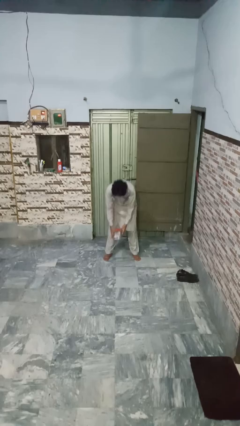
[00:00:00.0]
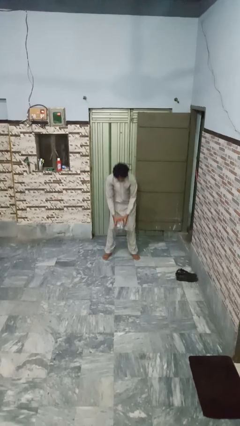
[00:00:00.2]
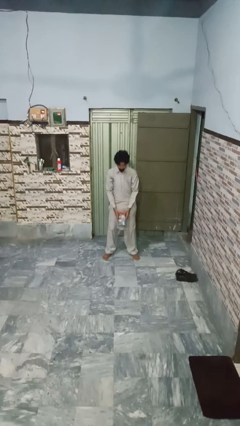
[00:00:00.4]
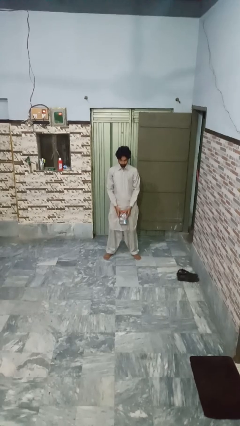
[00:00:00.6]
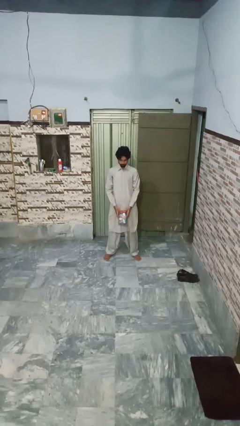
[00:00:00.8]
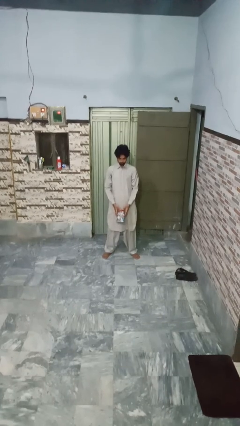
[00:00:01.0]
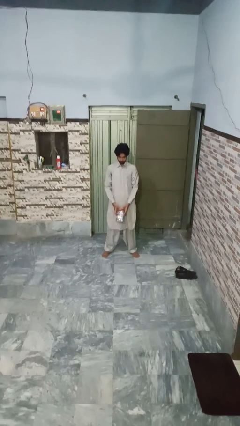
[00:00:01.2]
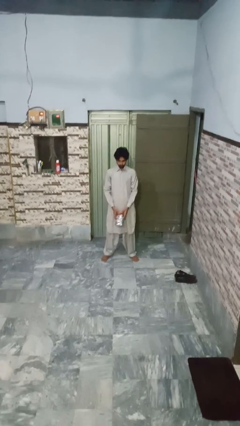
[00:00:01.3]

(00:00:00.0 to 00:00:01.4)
person picks up object from floor

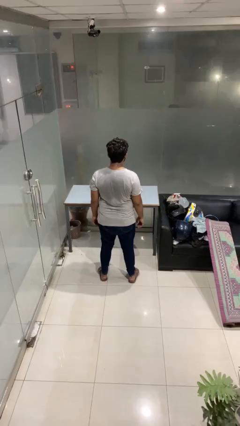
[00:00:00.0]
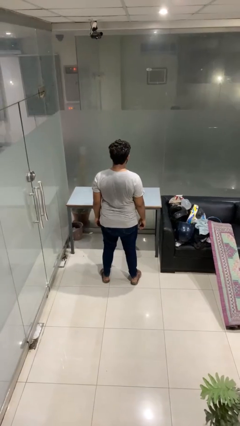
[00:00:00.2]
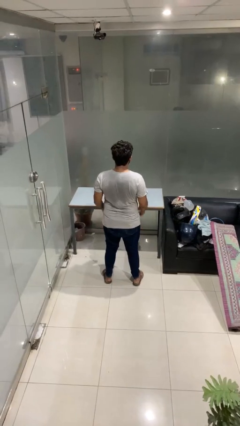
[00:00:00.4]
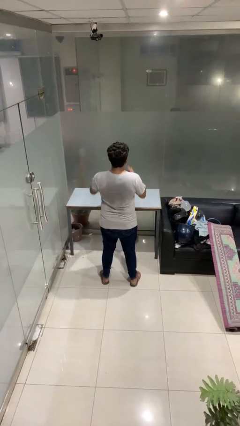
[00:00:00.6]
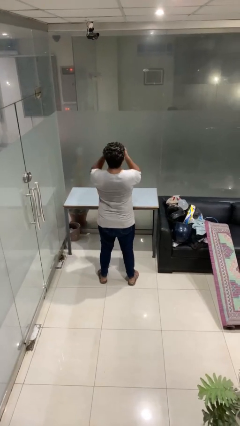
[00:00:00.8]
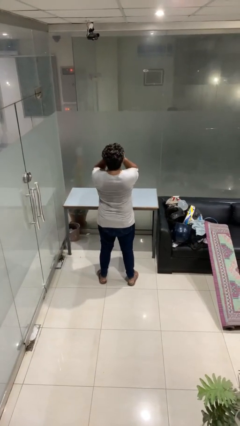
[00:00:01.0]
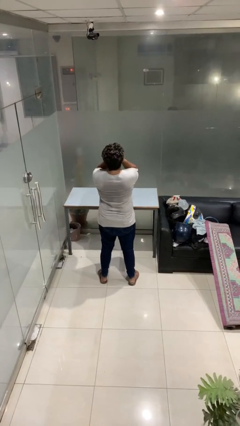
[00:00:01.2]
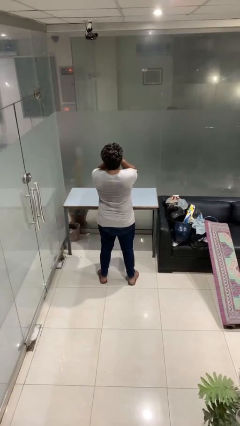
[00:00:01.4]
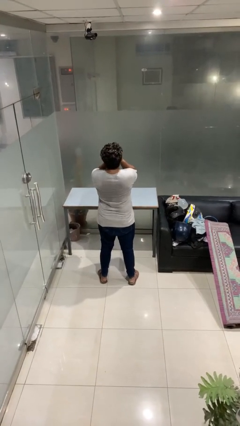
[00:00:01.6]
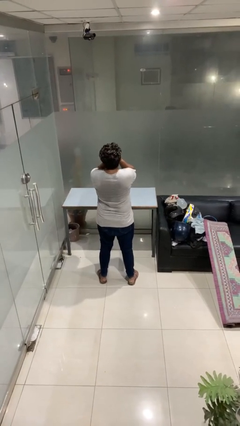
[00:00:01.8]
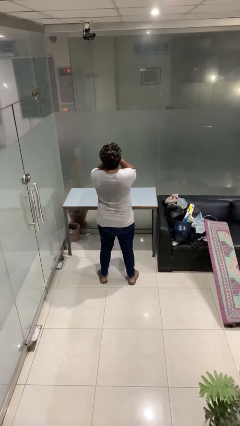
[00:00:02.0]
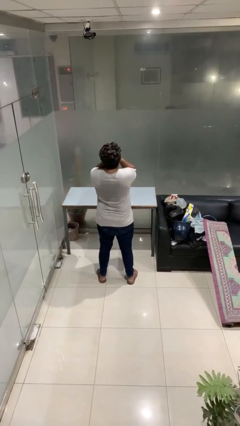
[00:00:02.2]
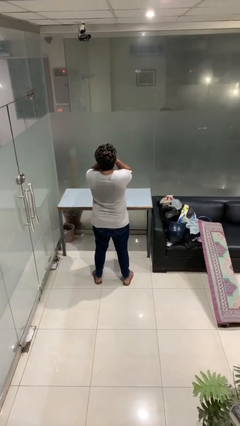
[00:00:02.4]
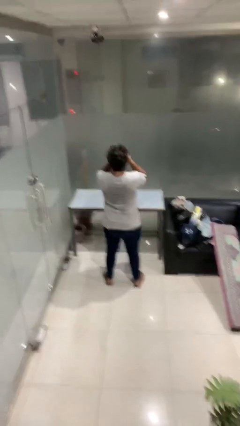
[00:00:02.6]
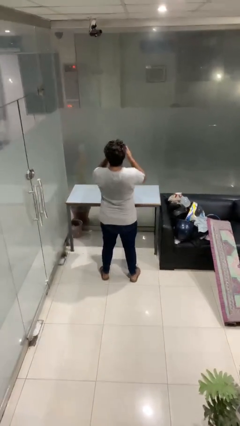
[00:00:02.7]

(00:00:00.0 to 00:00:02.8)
person covers face with hands

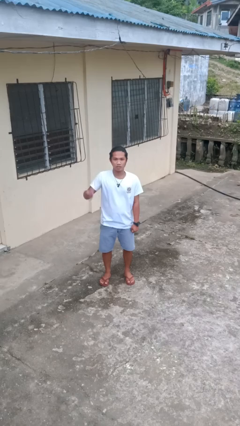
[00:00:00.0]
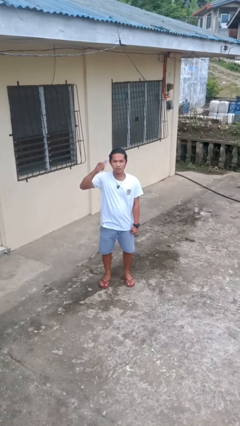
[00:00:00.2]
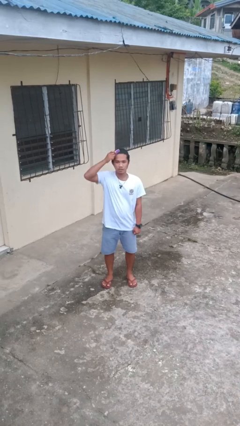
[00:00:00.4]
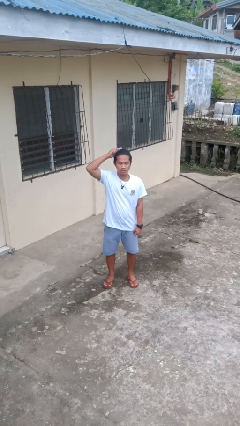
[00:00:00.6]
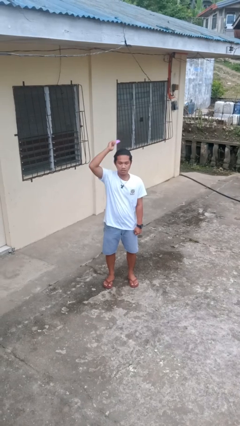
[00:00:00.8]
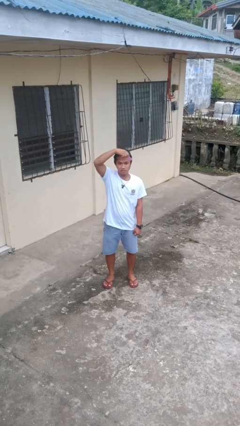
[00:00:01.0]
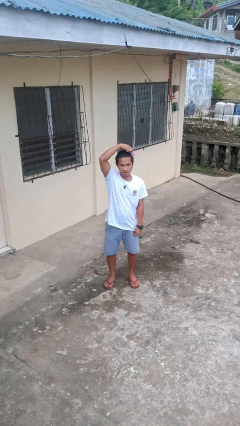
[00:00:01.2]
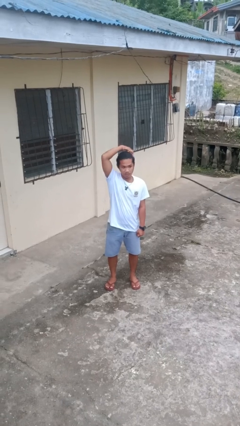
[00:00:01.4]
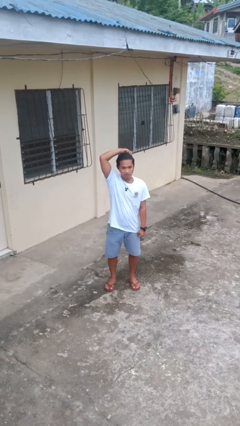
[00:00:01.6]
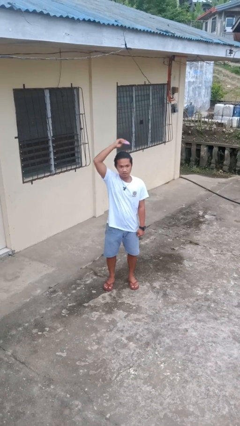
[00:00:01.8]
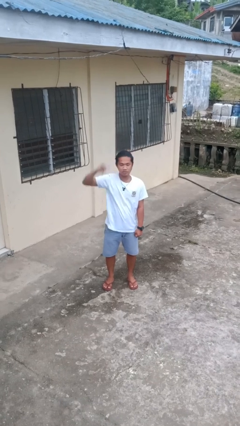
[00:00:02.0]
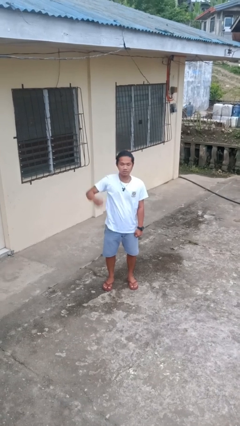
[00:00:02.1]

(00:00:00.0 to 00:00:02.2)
person brushes hair

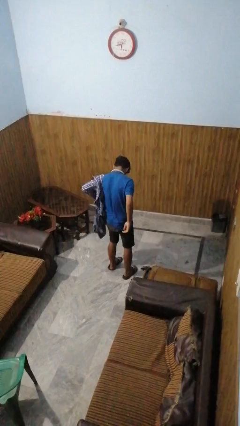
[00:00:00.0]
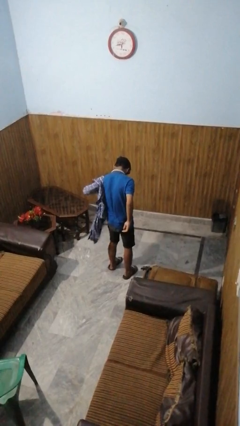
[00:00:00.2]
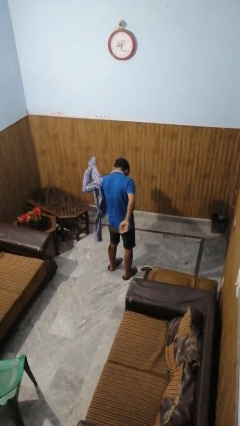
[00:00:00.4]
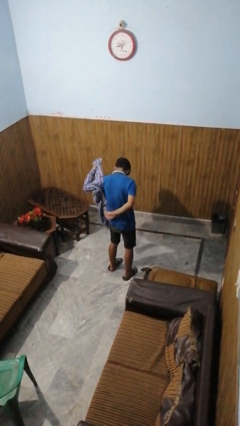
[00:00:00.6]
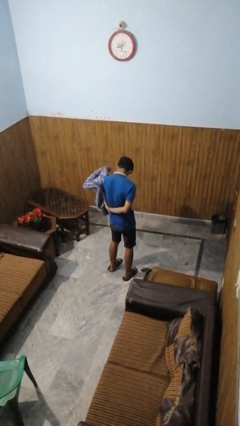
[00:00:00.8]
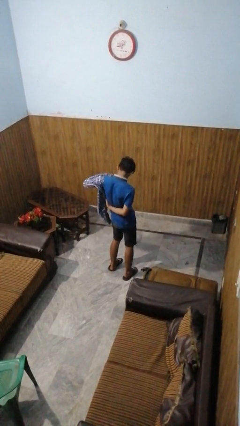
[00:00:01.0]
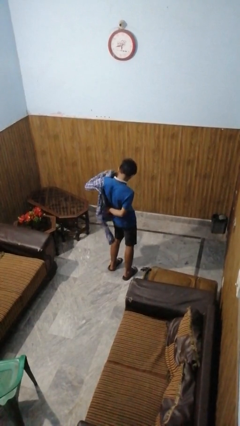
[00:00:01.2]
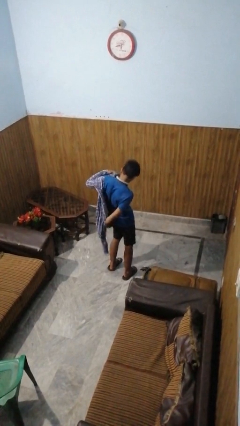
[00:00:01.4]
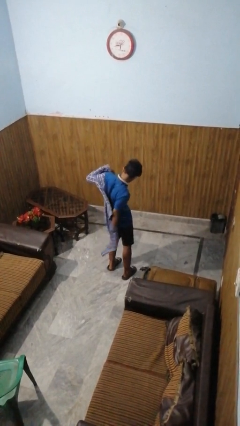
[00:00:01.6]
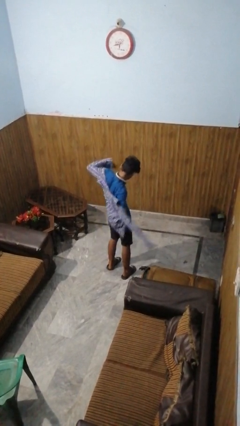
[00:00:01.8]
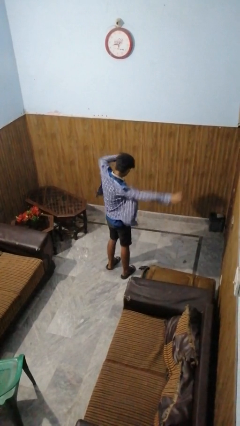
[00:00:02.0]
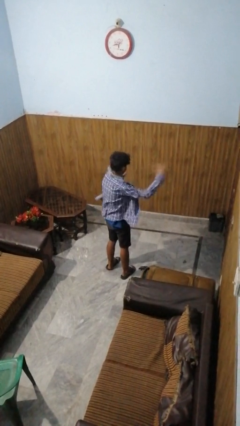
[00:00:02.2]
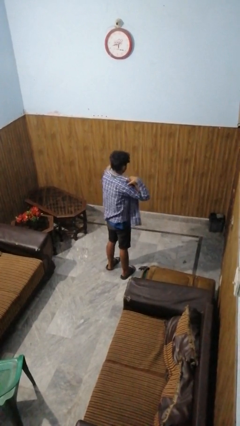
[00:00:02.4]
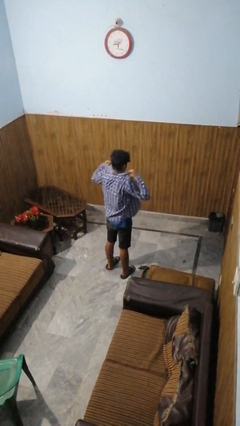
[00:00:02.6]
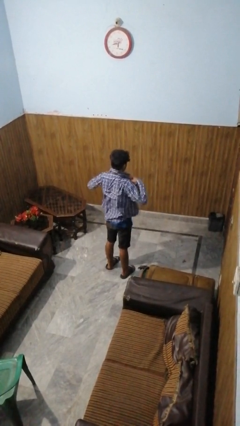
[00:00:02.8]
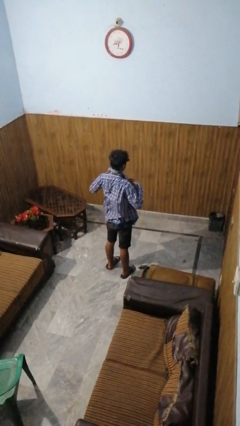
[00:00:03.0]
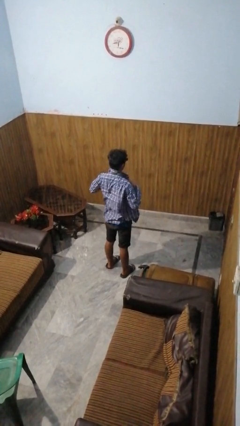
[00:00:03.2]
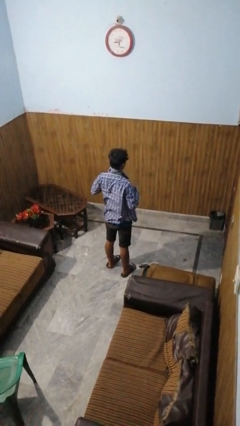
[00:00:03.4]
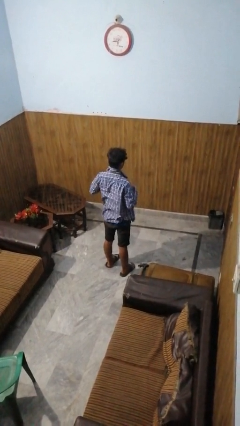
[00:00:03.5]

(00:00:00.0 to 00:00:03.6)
person puts on shirt

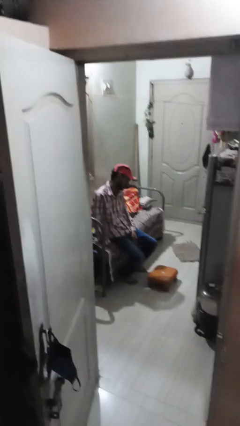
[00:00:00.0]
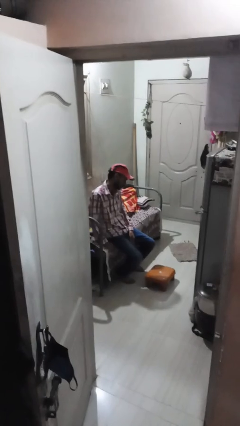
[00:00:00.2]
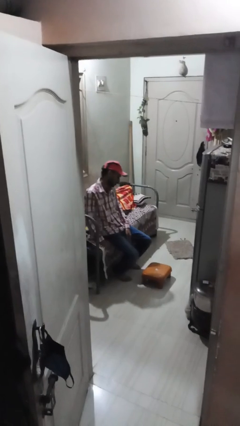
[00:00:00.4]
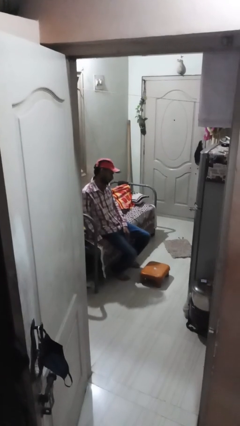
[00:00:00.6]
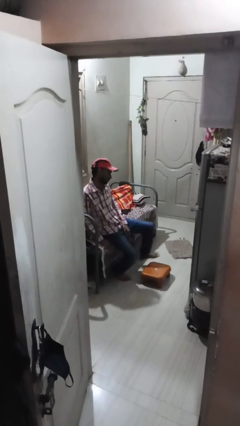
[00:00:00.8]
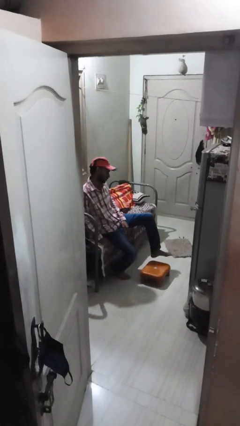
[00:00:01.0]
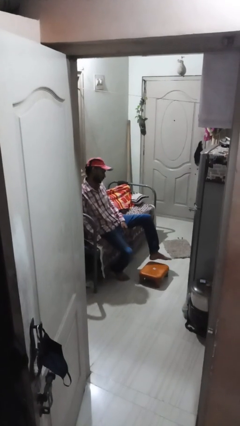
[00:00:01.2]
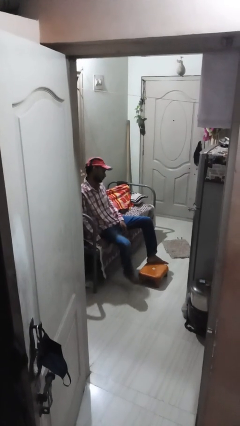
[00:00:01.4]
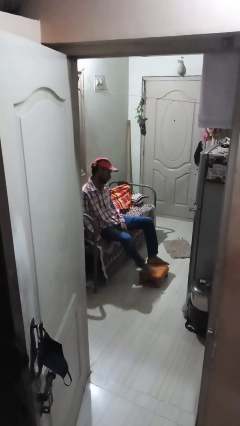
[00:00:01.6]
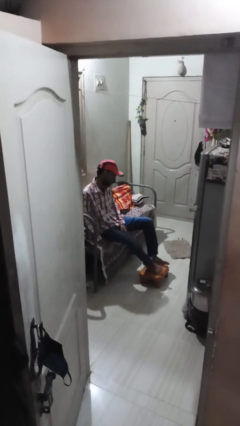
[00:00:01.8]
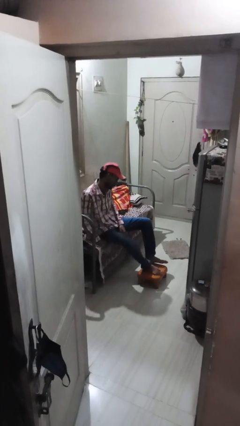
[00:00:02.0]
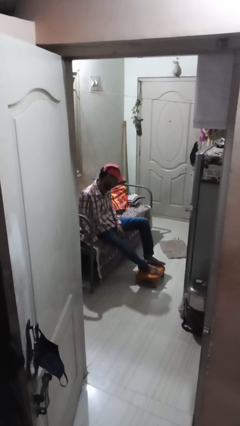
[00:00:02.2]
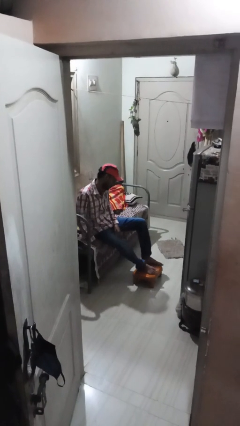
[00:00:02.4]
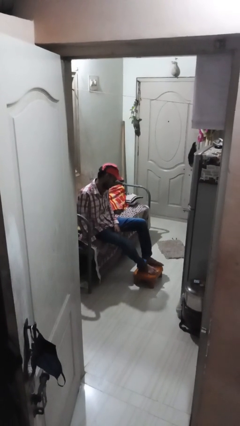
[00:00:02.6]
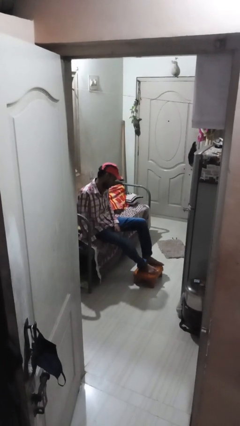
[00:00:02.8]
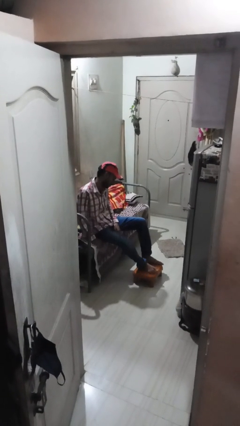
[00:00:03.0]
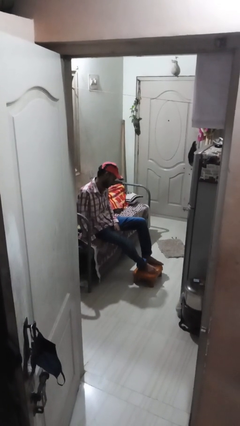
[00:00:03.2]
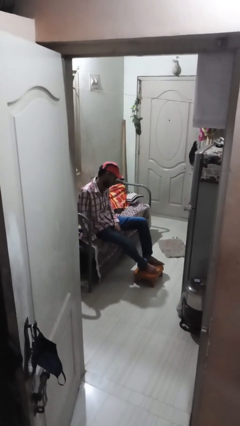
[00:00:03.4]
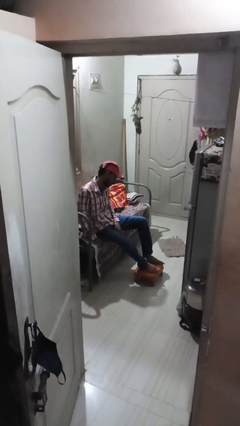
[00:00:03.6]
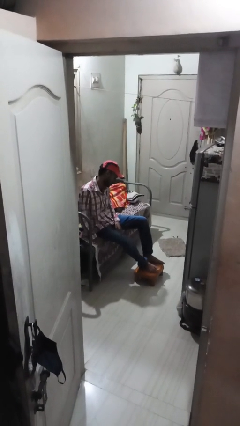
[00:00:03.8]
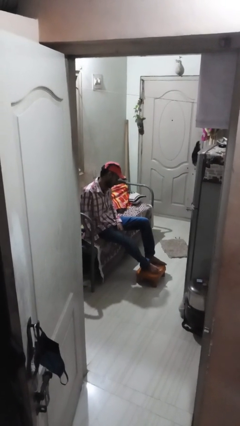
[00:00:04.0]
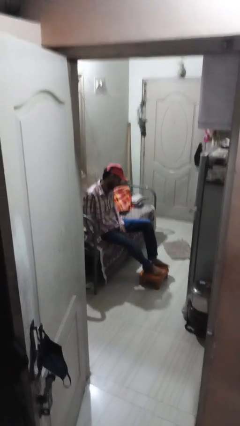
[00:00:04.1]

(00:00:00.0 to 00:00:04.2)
person puts feet up

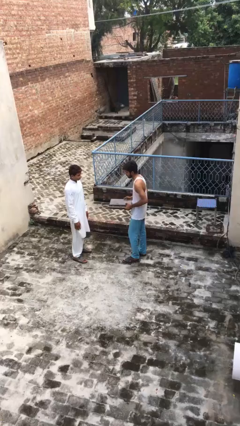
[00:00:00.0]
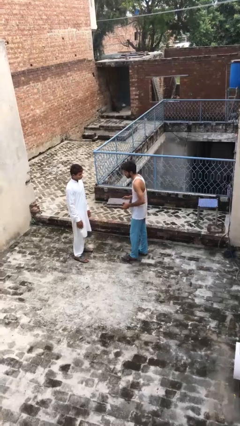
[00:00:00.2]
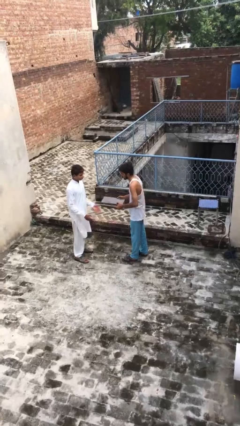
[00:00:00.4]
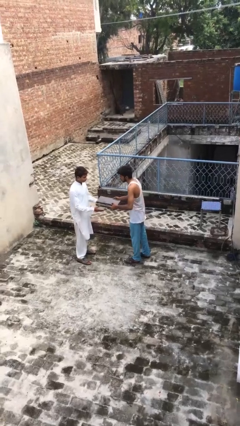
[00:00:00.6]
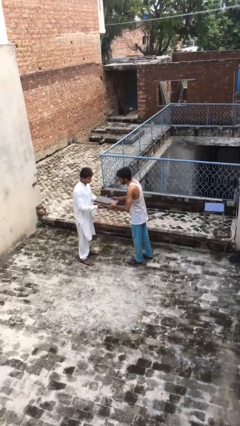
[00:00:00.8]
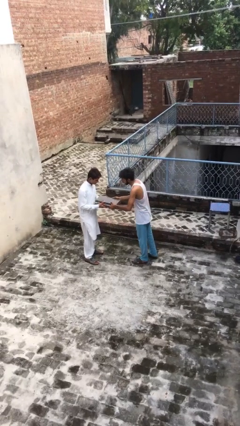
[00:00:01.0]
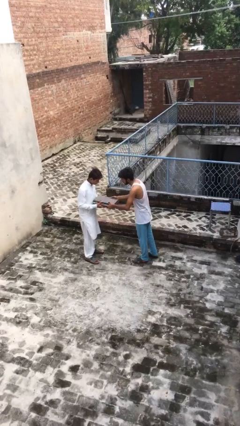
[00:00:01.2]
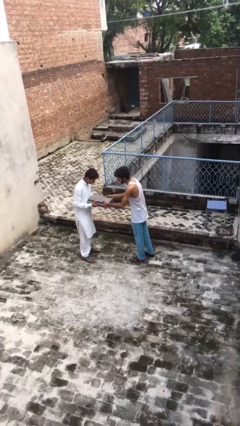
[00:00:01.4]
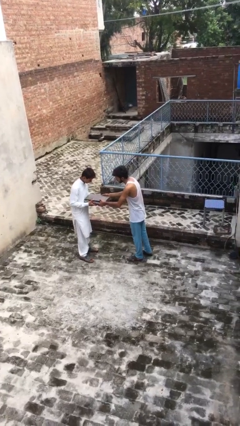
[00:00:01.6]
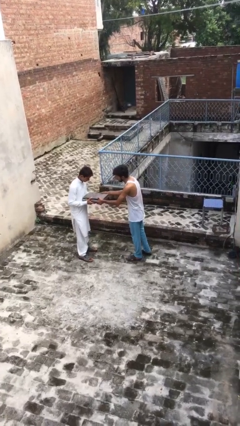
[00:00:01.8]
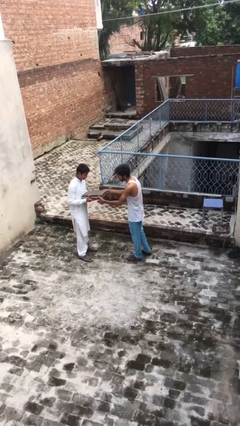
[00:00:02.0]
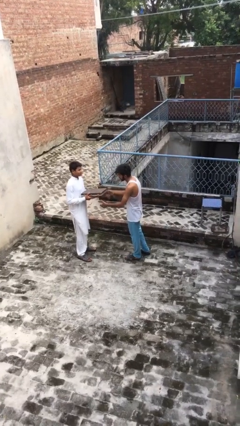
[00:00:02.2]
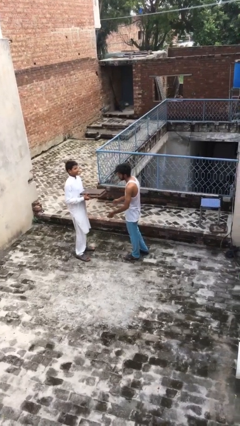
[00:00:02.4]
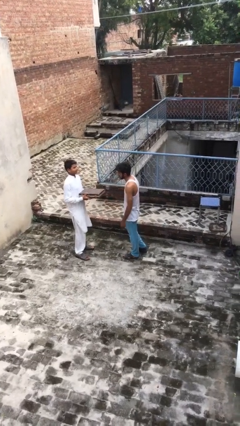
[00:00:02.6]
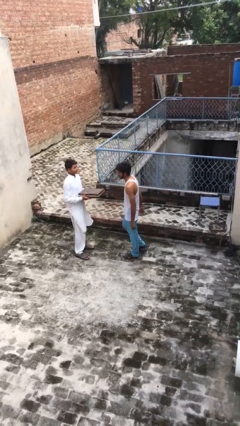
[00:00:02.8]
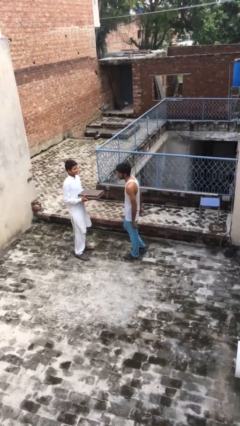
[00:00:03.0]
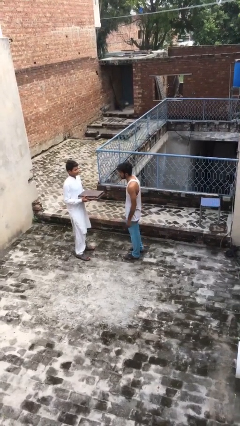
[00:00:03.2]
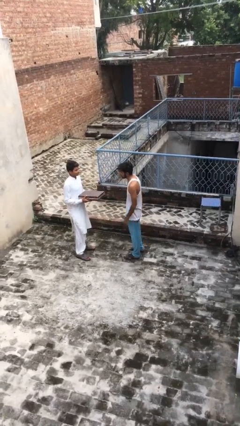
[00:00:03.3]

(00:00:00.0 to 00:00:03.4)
person transfers object to person
